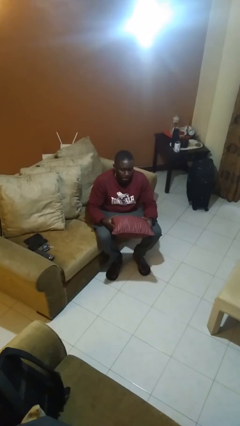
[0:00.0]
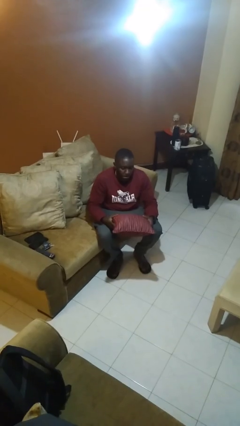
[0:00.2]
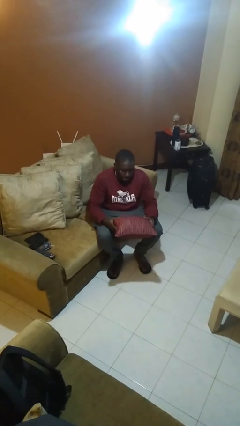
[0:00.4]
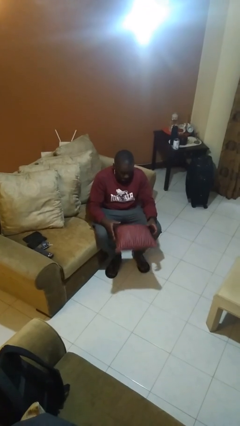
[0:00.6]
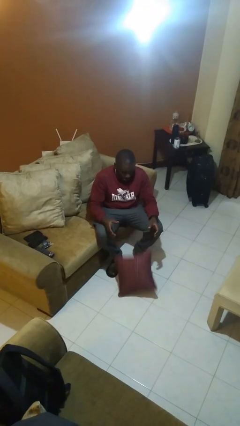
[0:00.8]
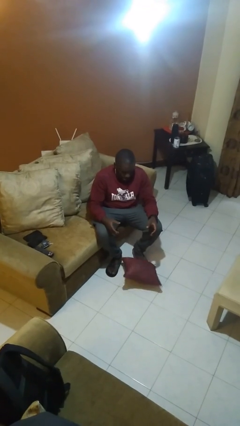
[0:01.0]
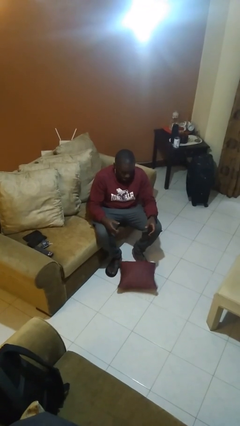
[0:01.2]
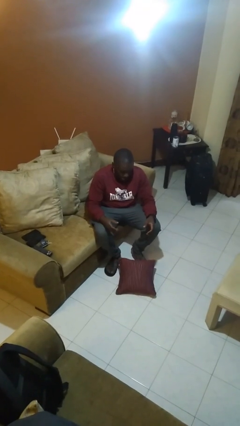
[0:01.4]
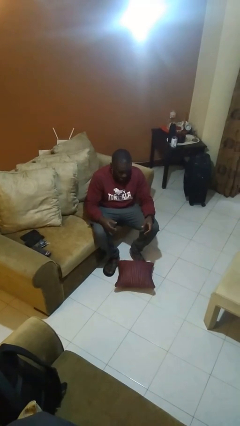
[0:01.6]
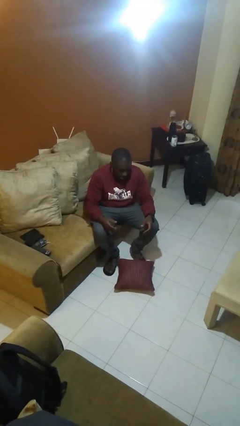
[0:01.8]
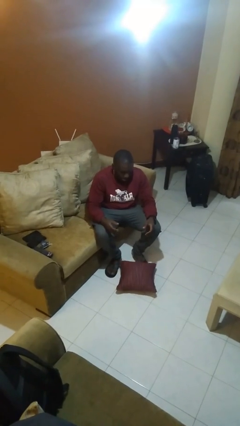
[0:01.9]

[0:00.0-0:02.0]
person drops object

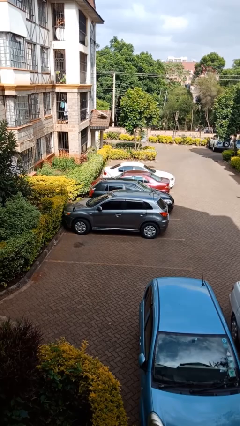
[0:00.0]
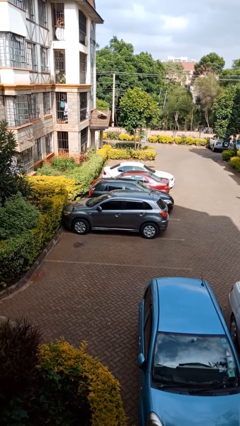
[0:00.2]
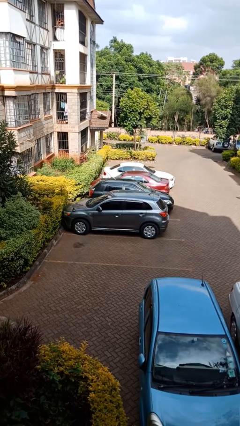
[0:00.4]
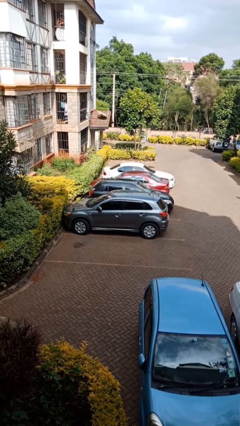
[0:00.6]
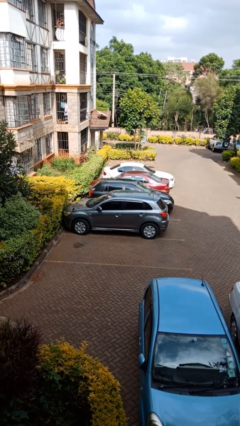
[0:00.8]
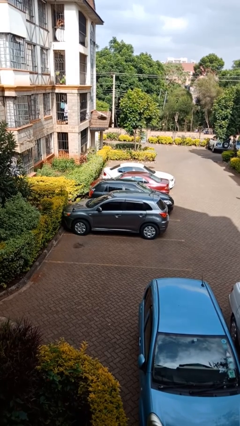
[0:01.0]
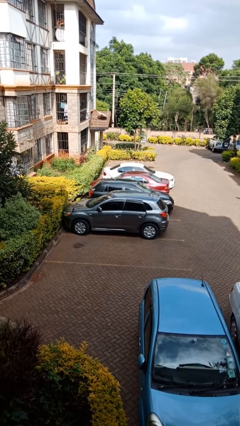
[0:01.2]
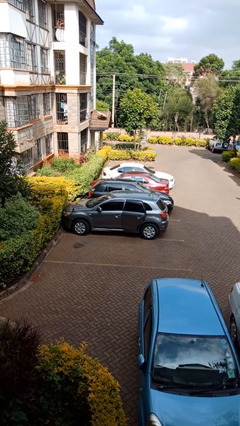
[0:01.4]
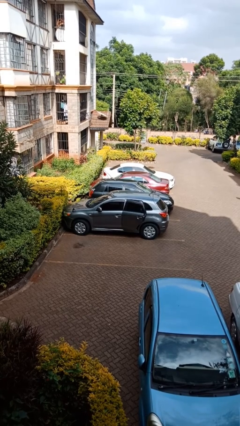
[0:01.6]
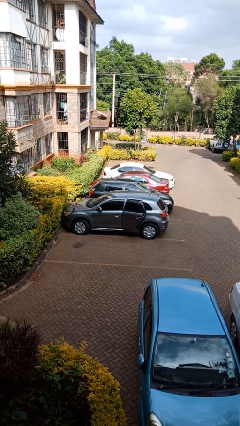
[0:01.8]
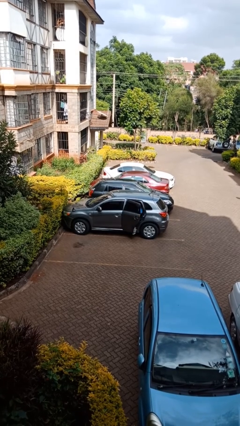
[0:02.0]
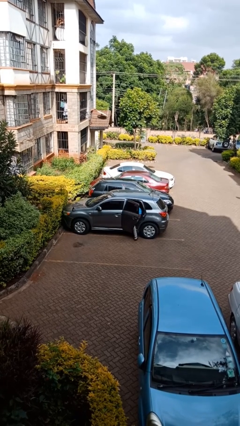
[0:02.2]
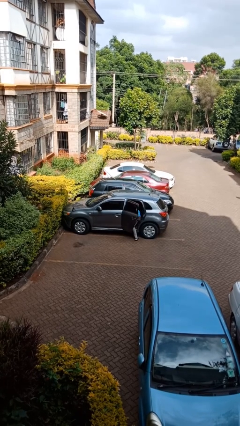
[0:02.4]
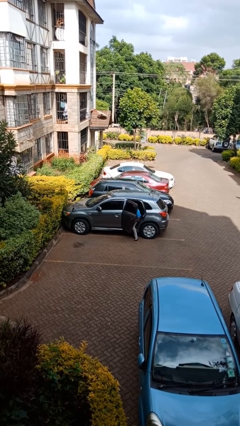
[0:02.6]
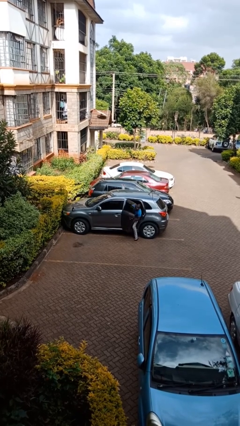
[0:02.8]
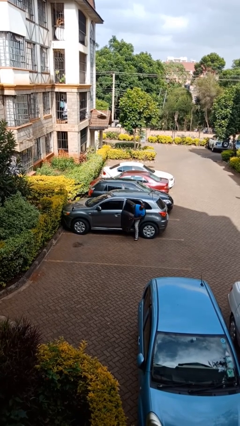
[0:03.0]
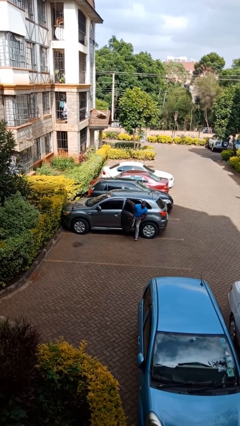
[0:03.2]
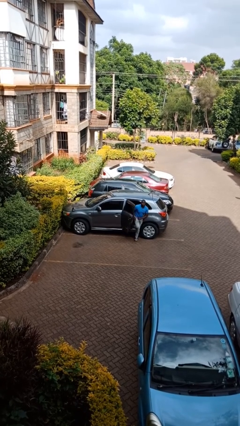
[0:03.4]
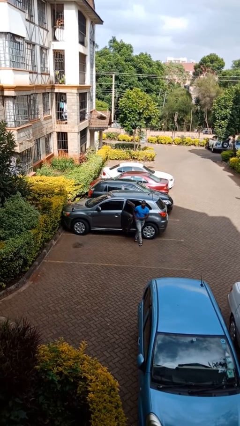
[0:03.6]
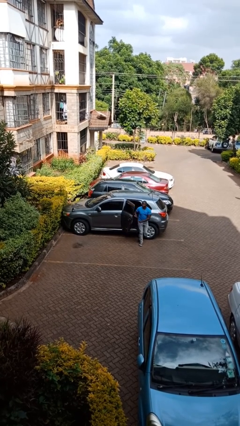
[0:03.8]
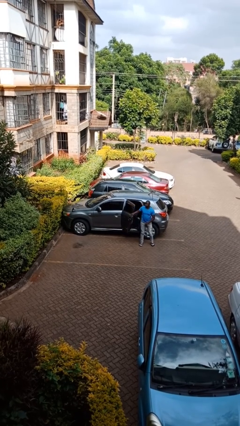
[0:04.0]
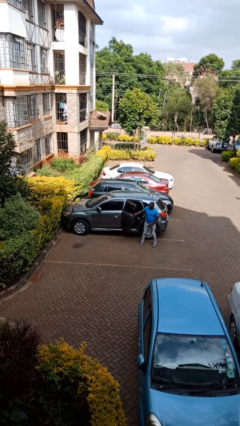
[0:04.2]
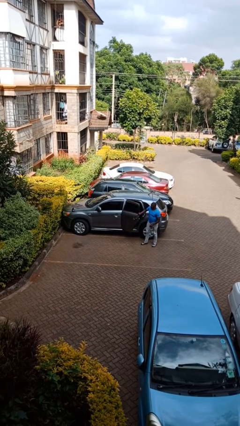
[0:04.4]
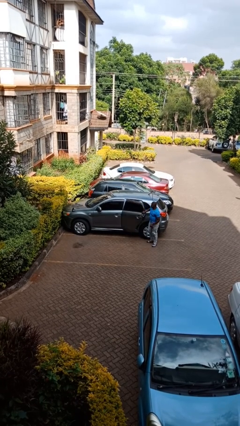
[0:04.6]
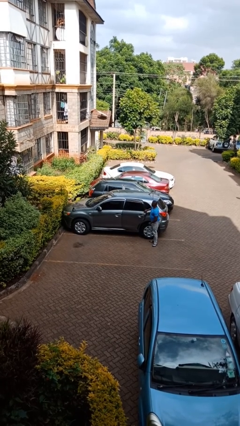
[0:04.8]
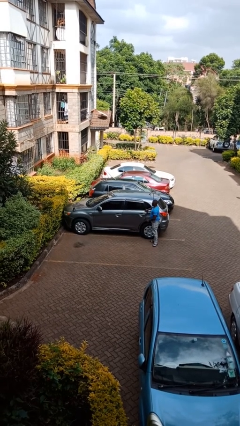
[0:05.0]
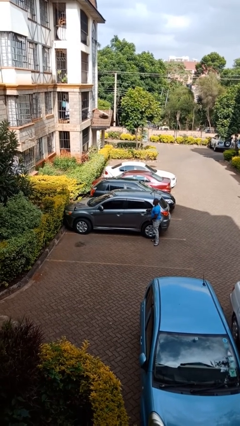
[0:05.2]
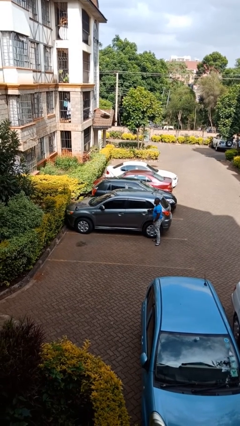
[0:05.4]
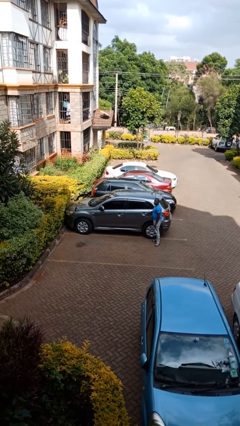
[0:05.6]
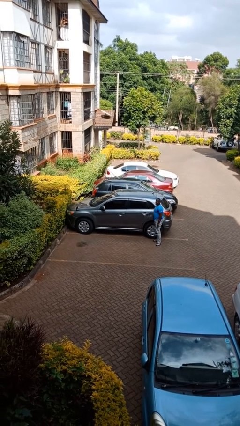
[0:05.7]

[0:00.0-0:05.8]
car drops off person

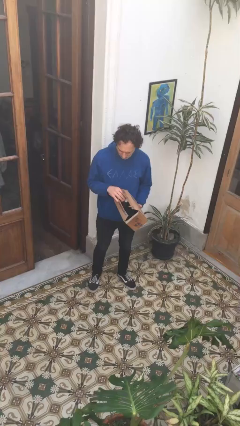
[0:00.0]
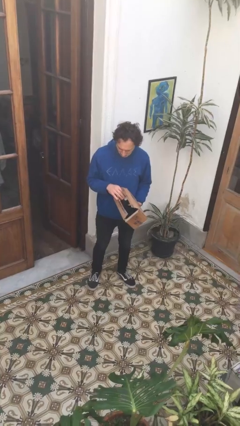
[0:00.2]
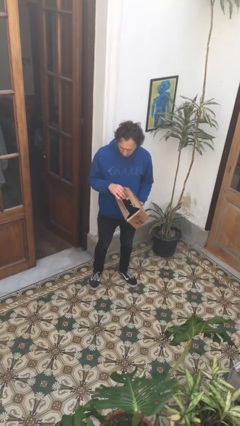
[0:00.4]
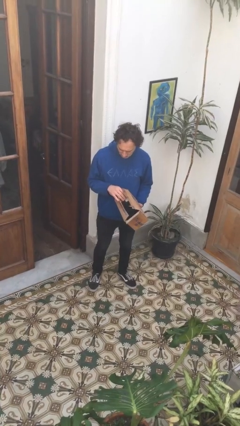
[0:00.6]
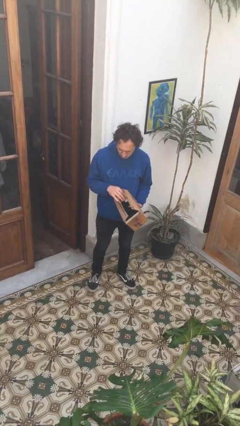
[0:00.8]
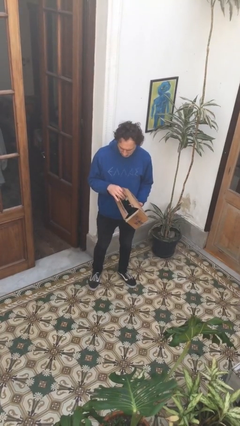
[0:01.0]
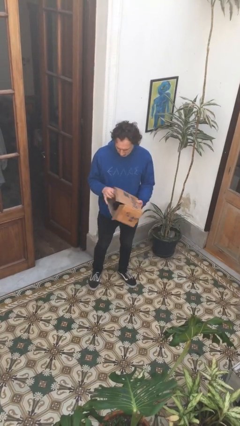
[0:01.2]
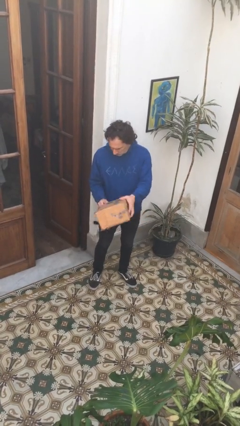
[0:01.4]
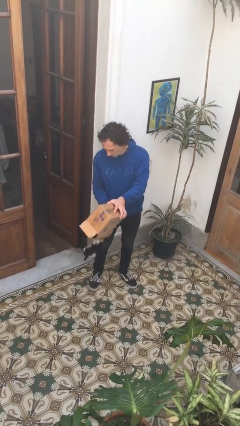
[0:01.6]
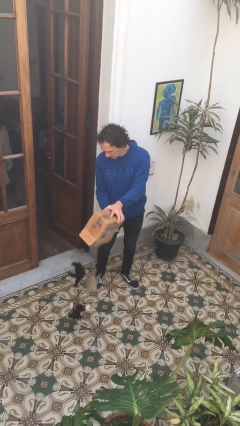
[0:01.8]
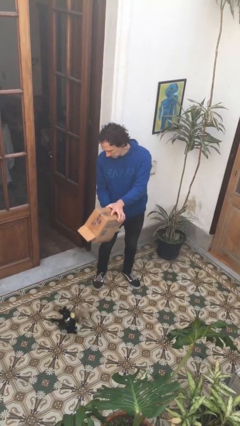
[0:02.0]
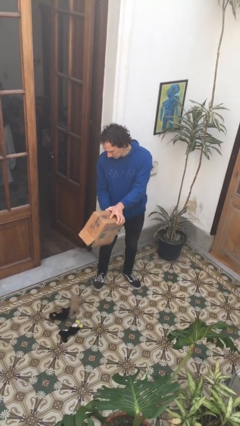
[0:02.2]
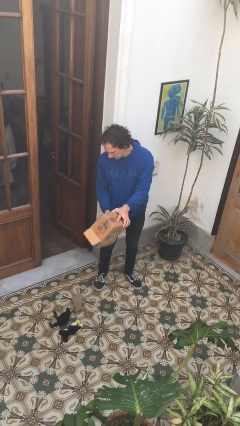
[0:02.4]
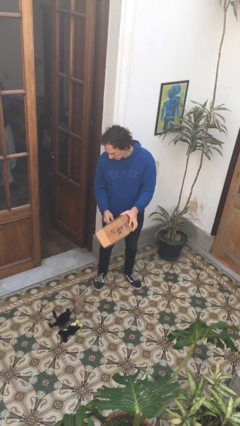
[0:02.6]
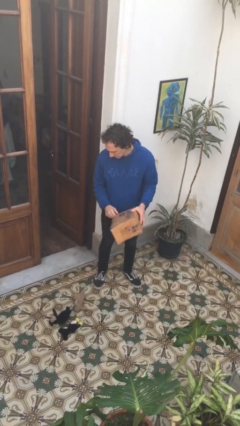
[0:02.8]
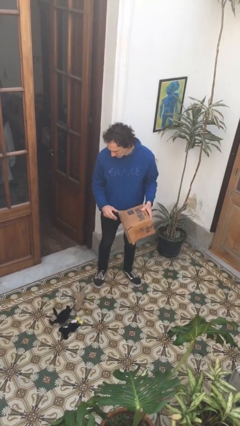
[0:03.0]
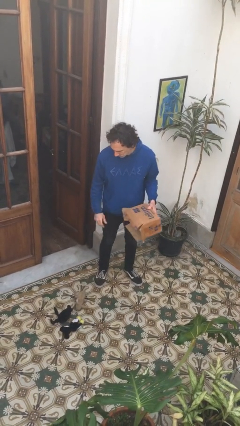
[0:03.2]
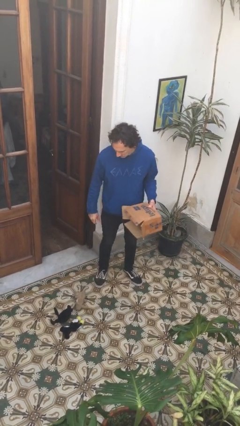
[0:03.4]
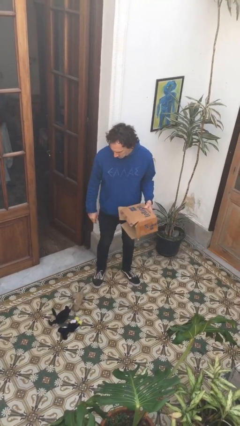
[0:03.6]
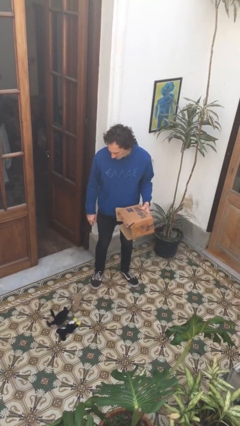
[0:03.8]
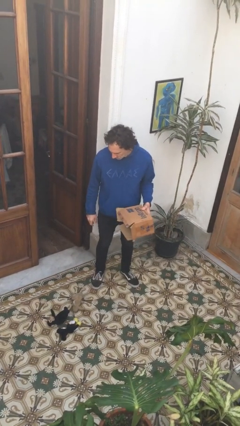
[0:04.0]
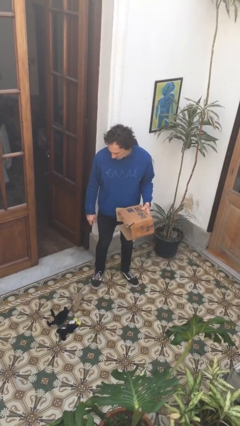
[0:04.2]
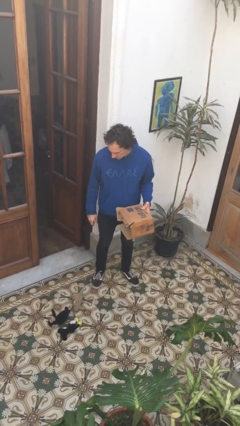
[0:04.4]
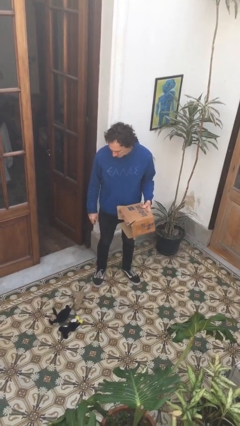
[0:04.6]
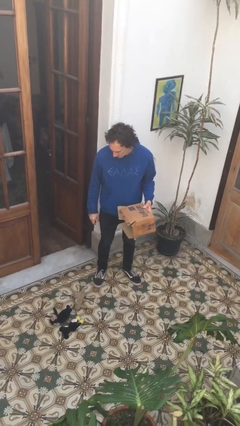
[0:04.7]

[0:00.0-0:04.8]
person unloads box onto floor

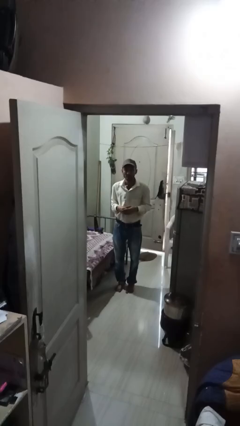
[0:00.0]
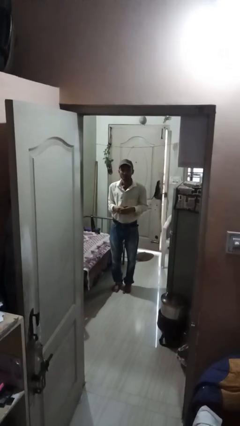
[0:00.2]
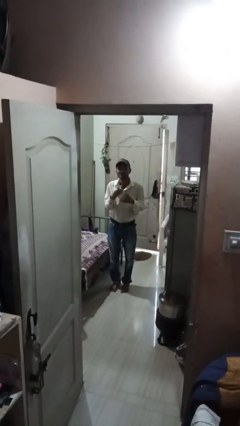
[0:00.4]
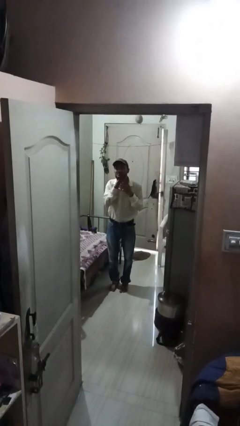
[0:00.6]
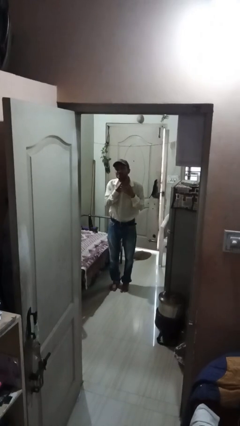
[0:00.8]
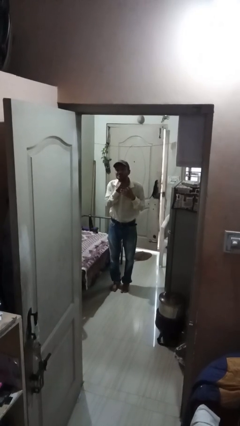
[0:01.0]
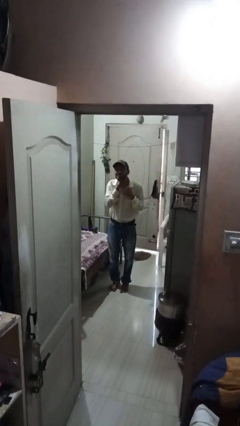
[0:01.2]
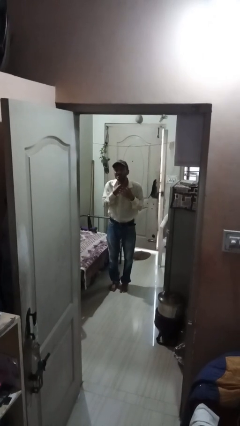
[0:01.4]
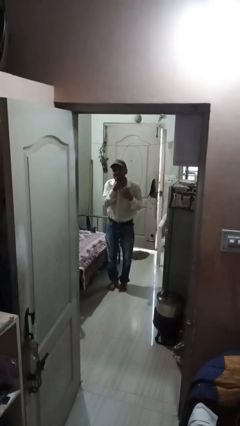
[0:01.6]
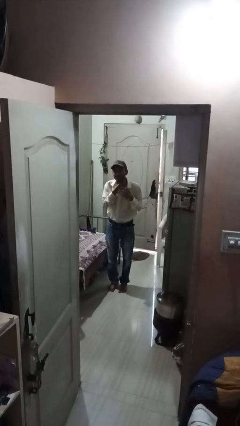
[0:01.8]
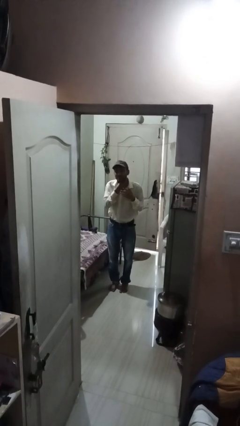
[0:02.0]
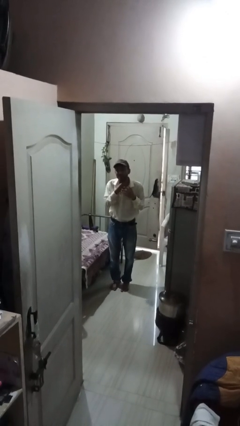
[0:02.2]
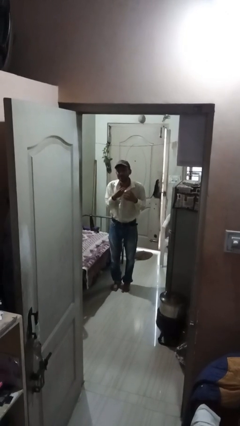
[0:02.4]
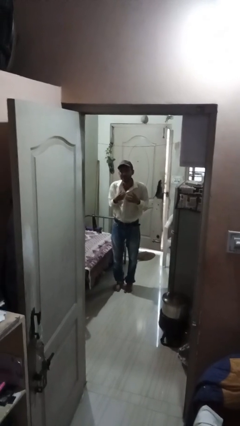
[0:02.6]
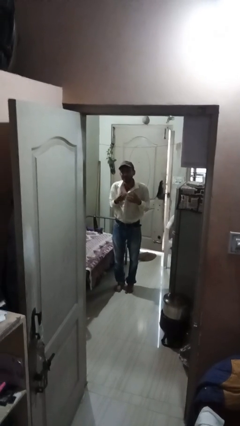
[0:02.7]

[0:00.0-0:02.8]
person rubs neck

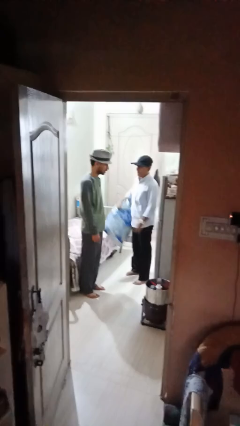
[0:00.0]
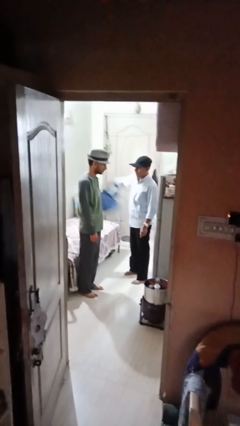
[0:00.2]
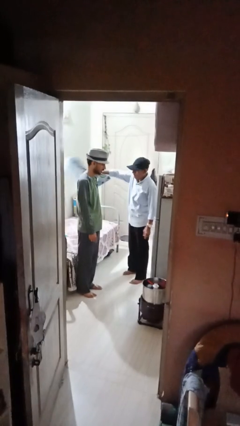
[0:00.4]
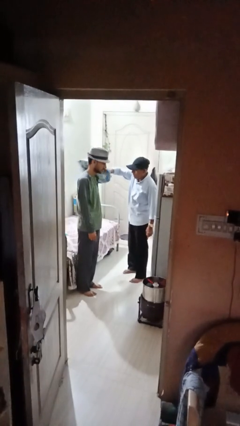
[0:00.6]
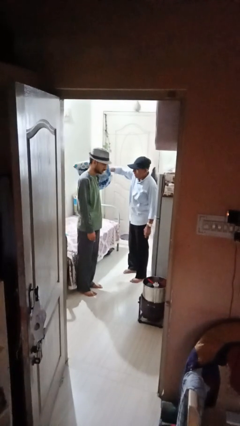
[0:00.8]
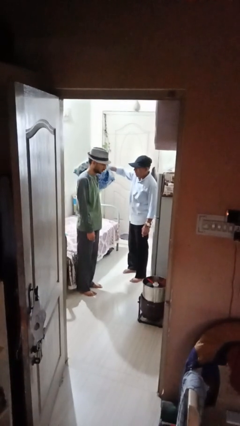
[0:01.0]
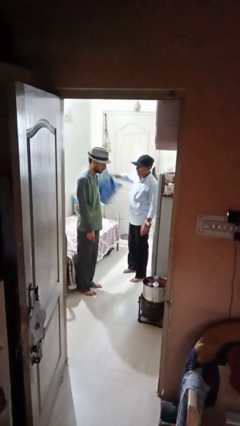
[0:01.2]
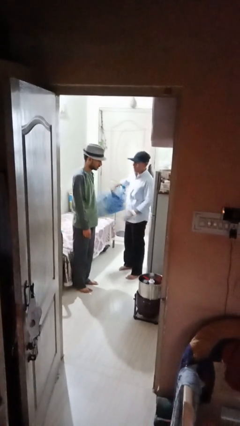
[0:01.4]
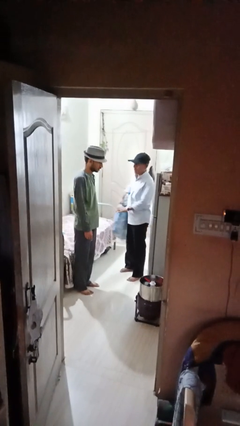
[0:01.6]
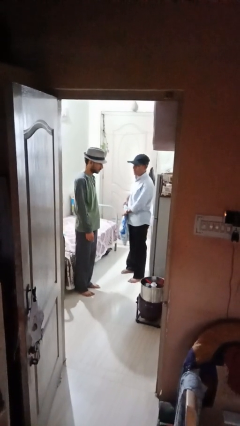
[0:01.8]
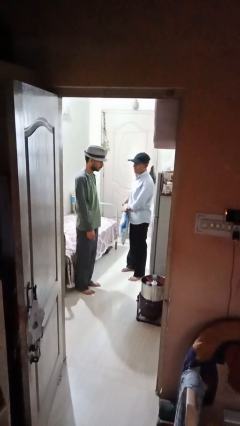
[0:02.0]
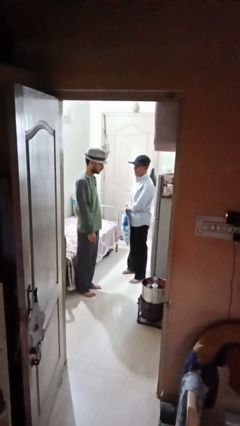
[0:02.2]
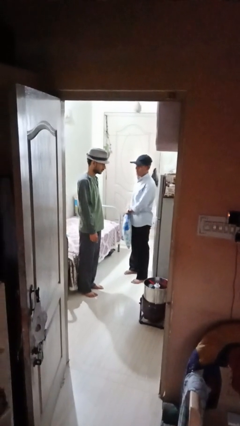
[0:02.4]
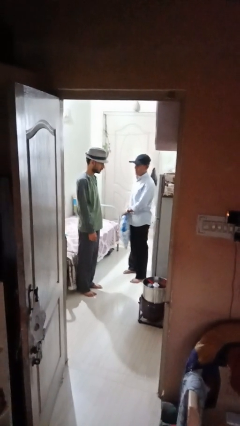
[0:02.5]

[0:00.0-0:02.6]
person hits person with pillow
